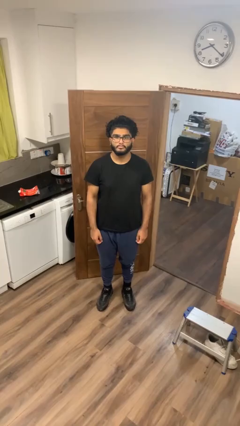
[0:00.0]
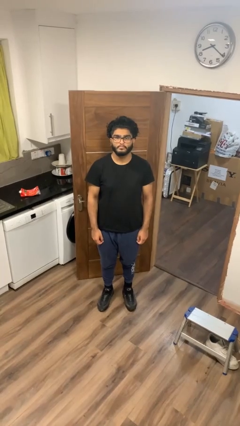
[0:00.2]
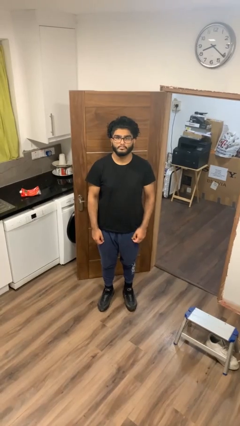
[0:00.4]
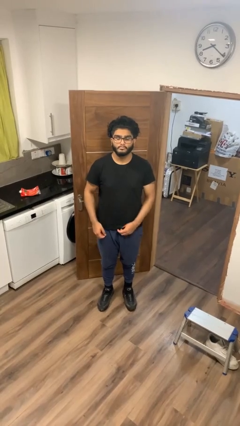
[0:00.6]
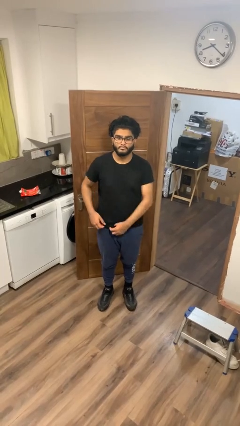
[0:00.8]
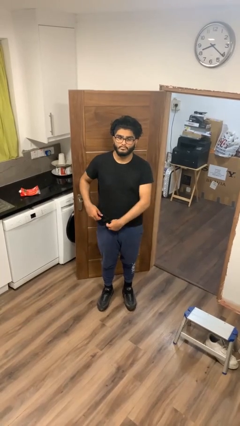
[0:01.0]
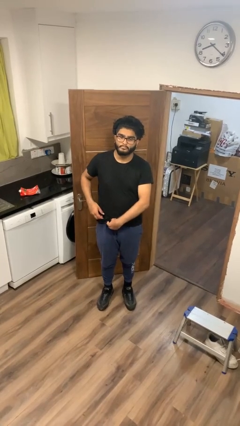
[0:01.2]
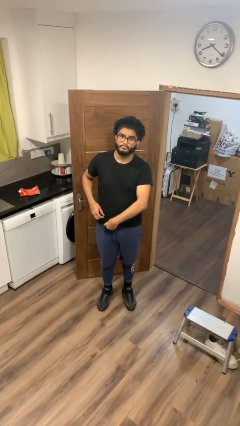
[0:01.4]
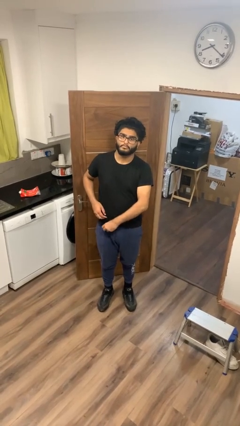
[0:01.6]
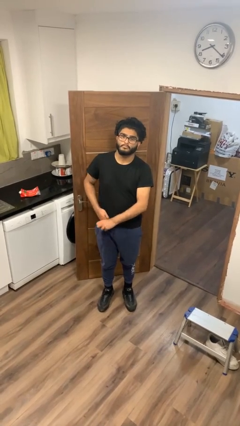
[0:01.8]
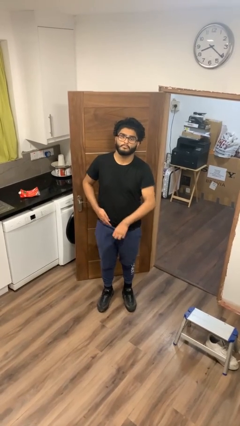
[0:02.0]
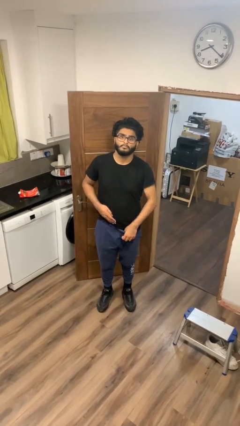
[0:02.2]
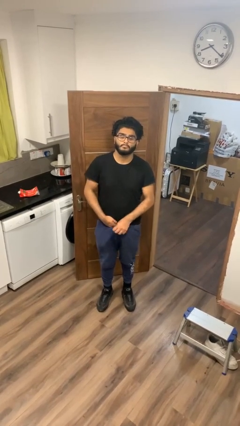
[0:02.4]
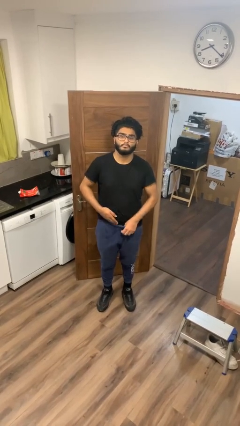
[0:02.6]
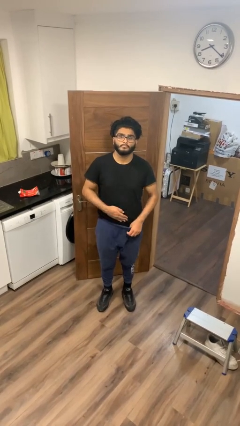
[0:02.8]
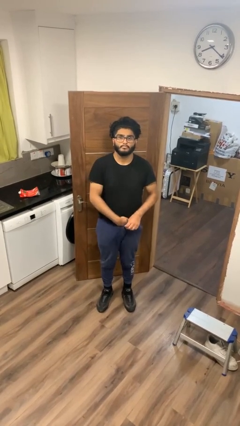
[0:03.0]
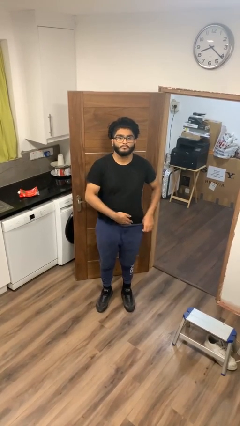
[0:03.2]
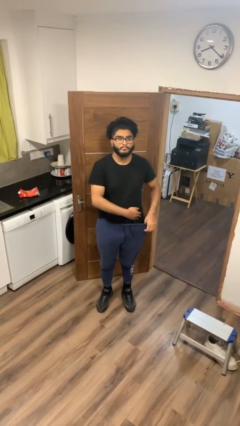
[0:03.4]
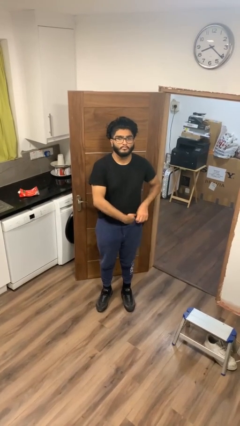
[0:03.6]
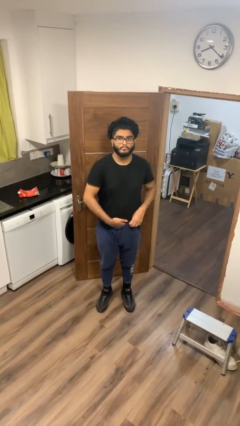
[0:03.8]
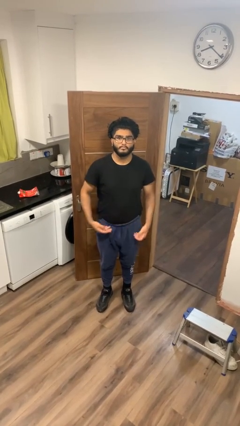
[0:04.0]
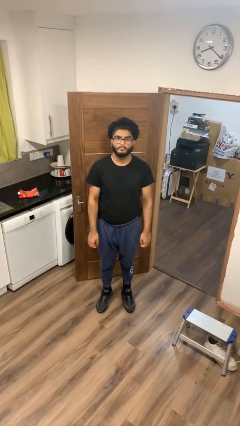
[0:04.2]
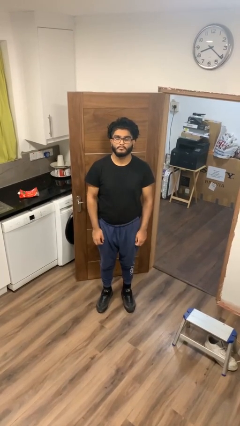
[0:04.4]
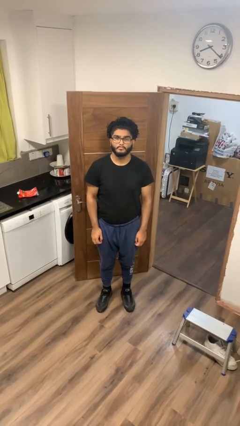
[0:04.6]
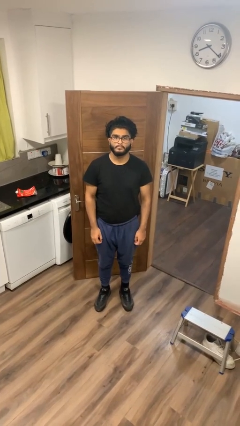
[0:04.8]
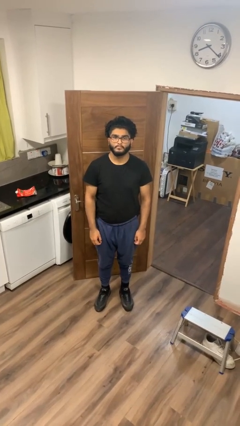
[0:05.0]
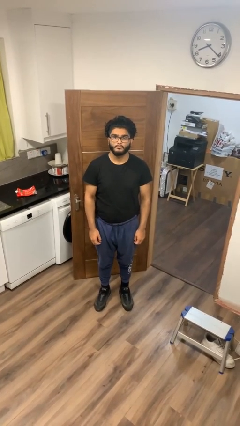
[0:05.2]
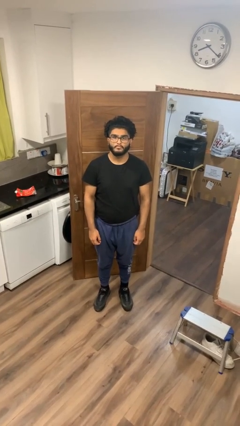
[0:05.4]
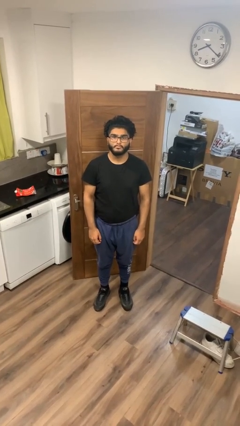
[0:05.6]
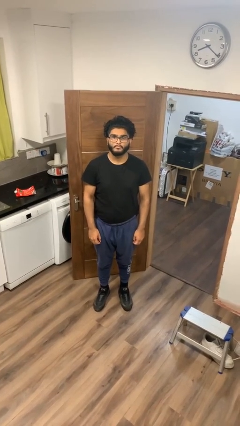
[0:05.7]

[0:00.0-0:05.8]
person tucks in shirt

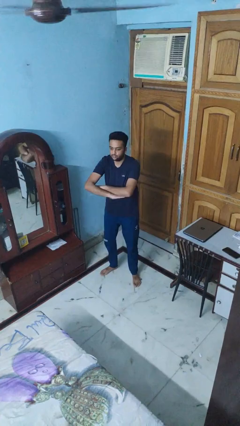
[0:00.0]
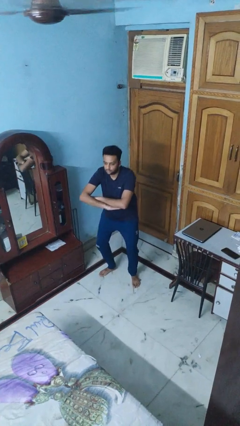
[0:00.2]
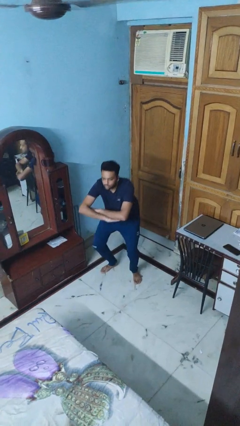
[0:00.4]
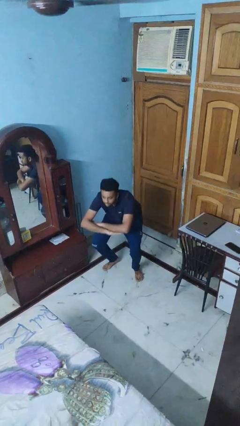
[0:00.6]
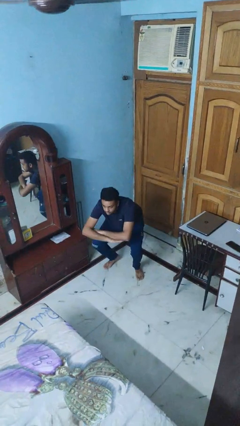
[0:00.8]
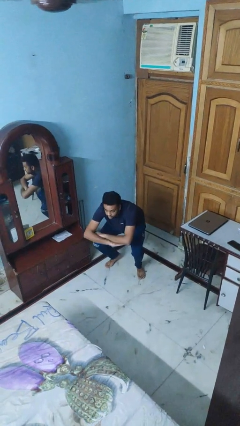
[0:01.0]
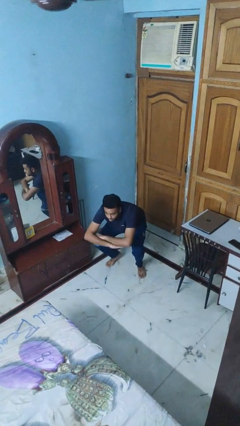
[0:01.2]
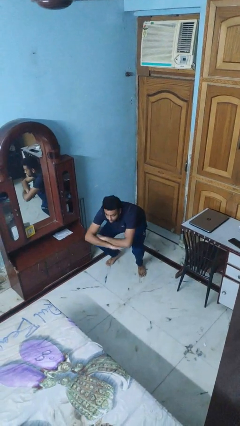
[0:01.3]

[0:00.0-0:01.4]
person squats

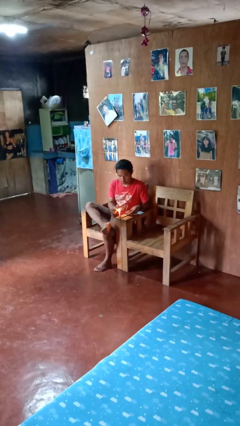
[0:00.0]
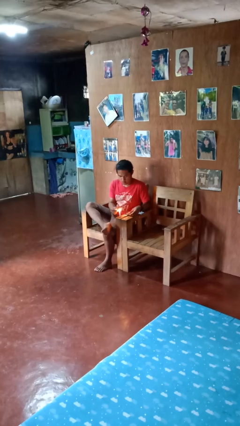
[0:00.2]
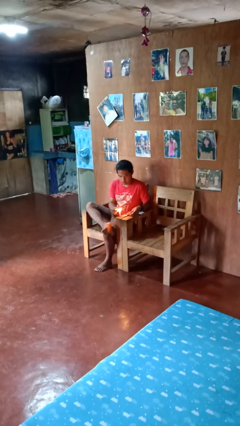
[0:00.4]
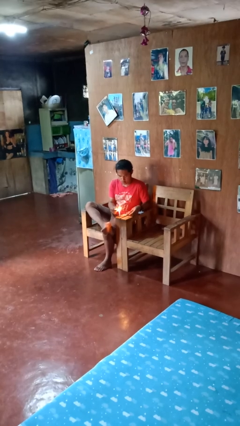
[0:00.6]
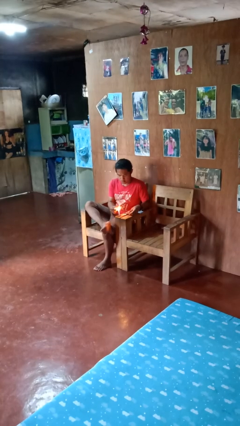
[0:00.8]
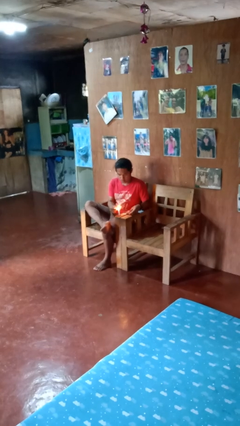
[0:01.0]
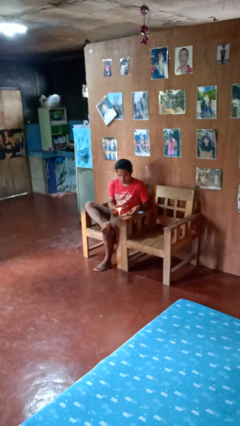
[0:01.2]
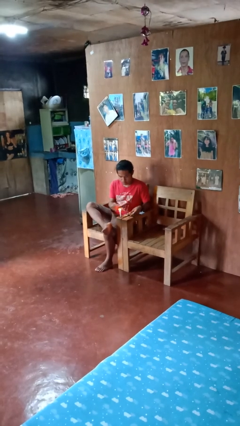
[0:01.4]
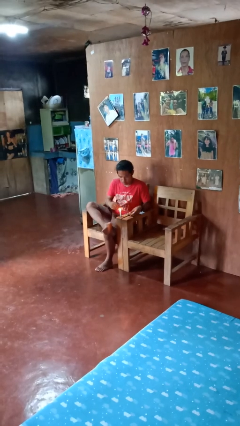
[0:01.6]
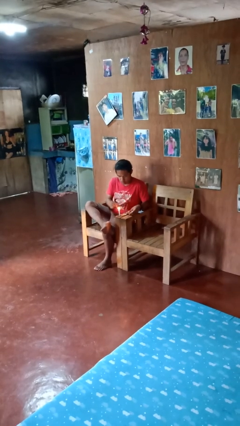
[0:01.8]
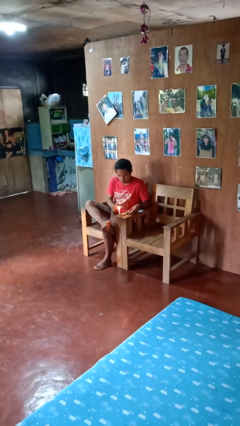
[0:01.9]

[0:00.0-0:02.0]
person lights candle

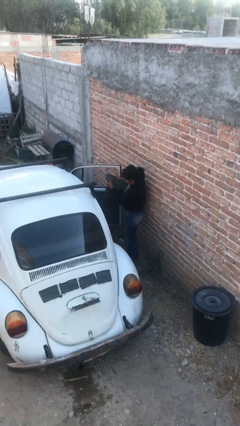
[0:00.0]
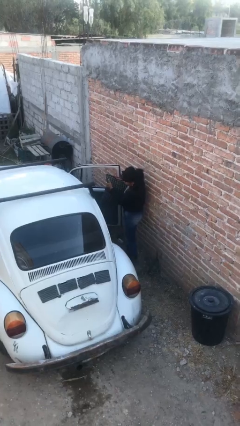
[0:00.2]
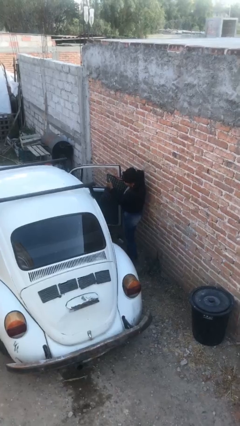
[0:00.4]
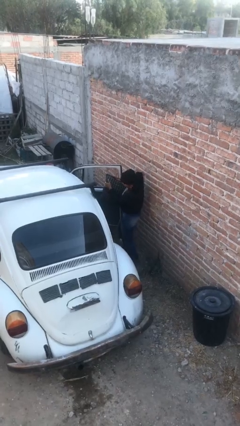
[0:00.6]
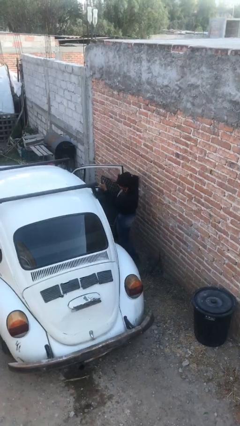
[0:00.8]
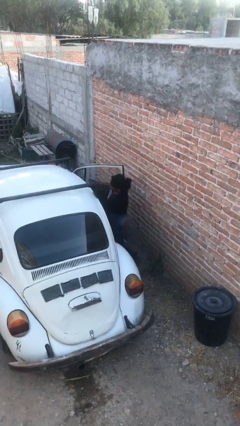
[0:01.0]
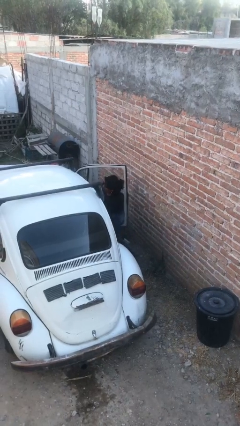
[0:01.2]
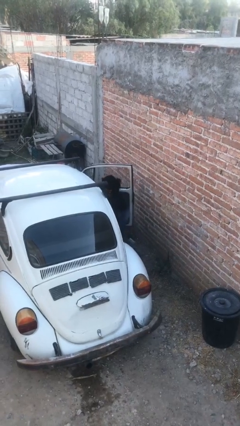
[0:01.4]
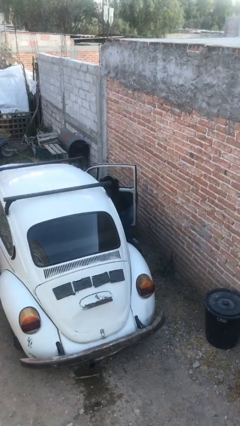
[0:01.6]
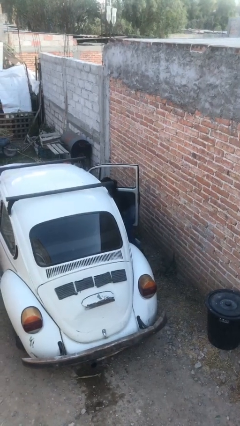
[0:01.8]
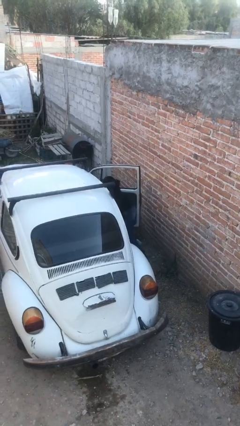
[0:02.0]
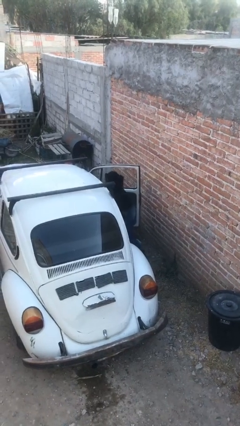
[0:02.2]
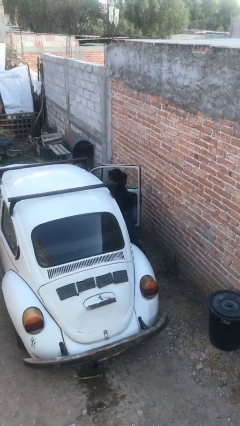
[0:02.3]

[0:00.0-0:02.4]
person loads car

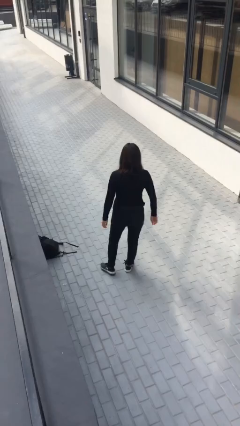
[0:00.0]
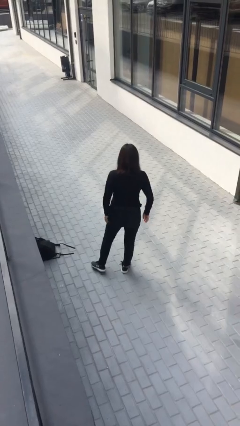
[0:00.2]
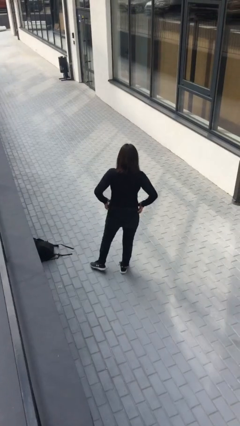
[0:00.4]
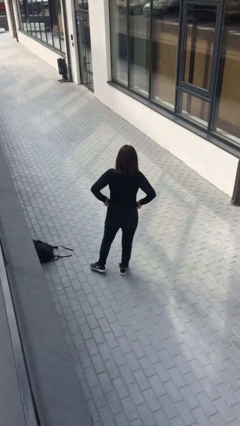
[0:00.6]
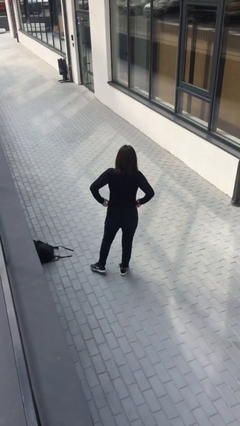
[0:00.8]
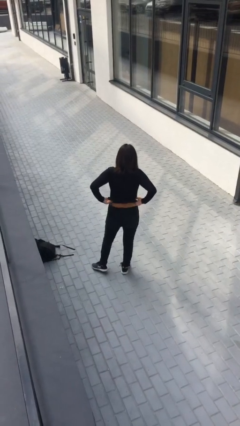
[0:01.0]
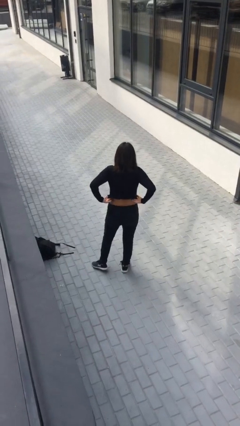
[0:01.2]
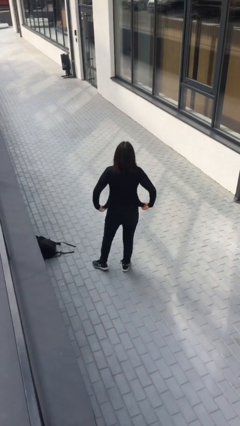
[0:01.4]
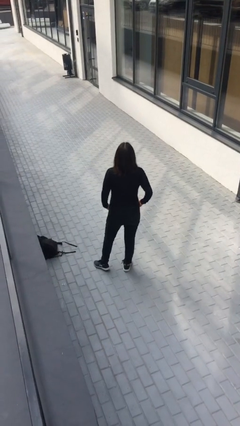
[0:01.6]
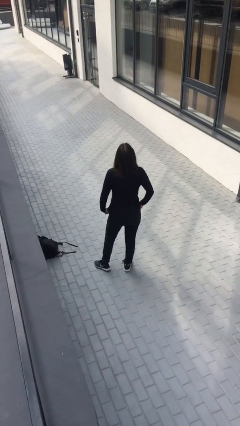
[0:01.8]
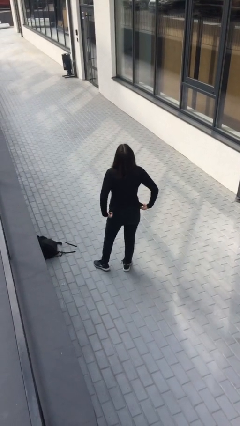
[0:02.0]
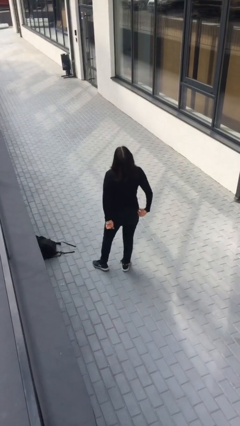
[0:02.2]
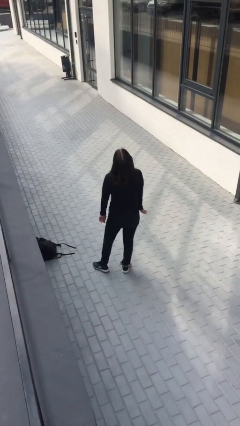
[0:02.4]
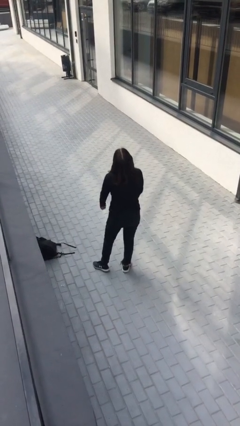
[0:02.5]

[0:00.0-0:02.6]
person untucks shirt

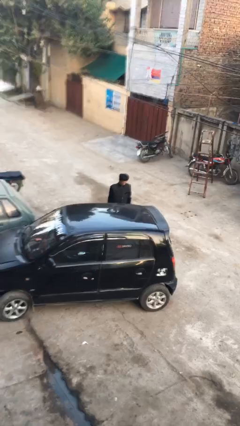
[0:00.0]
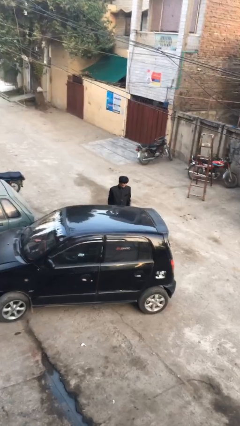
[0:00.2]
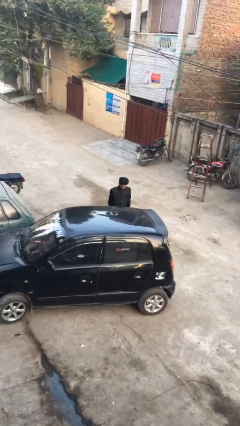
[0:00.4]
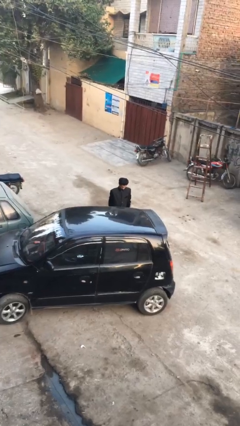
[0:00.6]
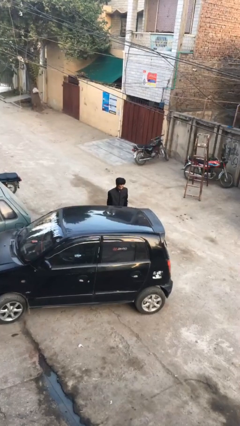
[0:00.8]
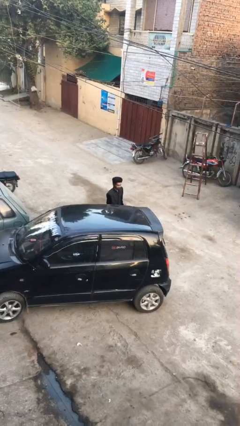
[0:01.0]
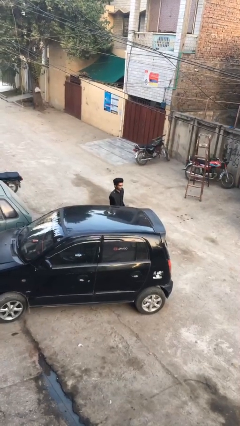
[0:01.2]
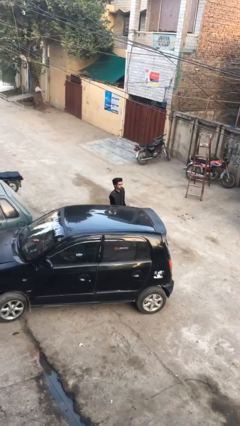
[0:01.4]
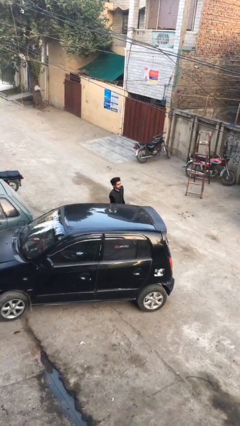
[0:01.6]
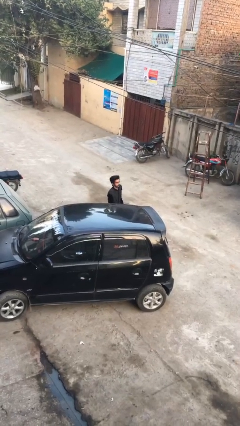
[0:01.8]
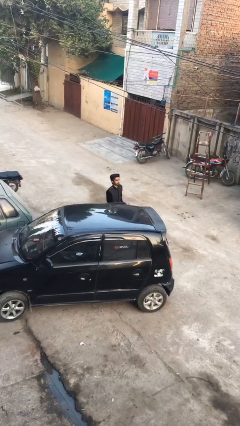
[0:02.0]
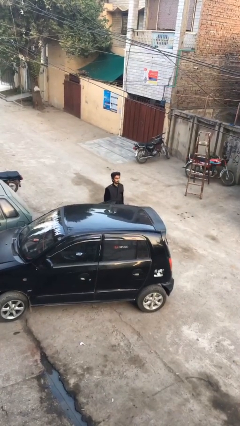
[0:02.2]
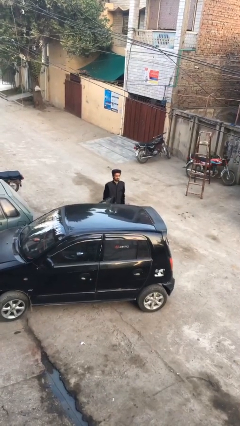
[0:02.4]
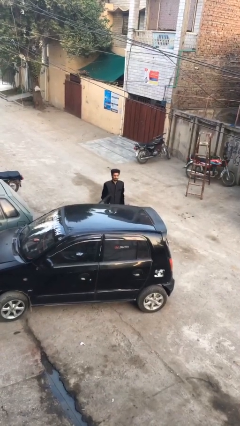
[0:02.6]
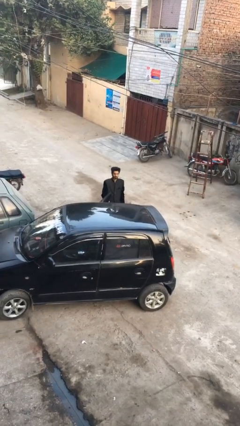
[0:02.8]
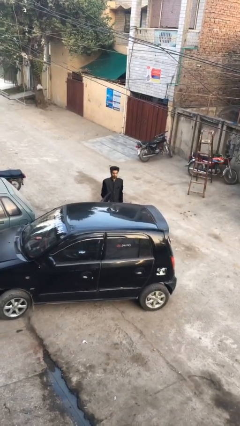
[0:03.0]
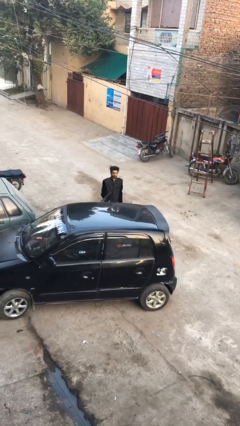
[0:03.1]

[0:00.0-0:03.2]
person opens car door

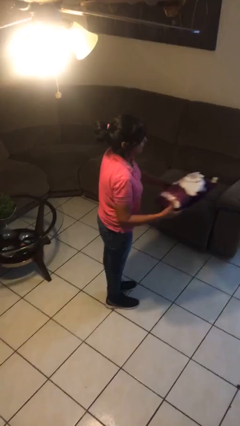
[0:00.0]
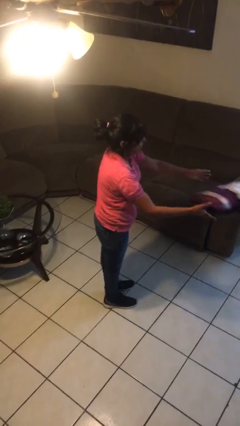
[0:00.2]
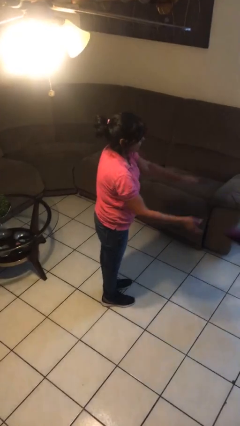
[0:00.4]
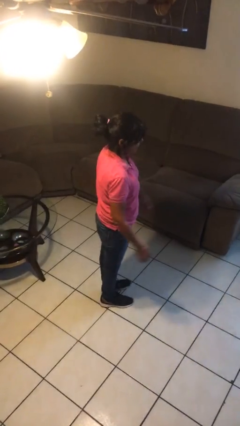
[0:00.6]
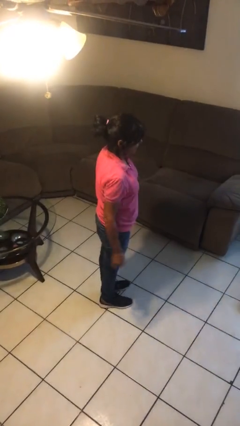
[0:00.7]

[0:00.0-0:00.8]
person throws object to ground
